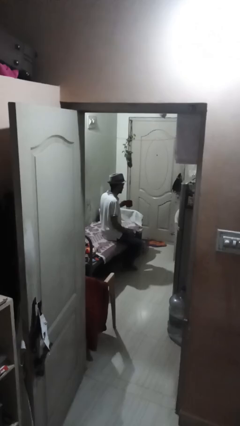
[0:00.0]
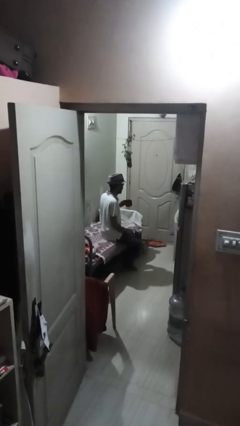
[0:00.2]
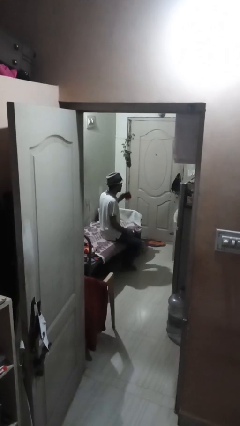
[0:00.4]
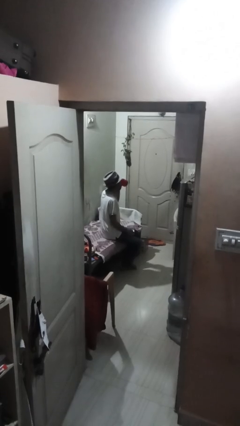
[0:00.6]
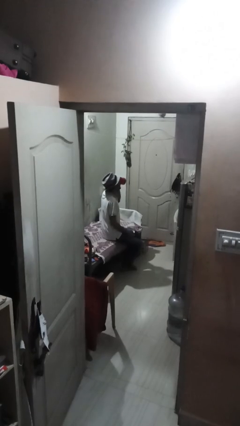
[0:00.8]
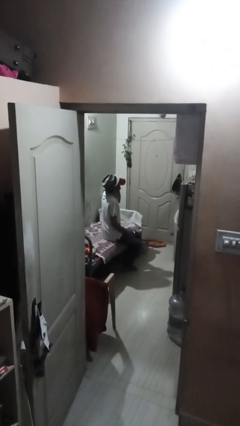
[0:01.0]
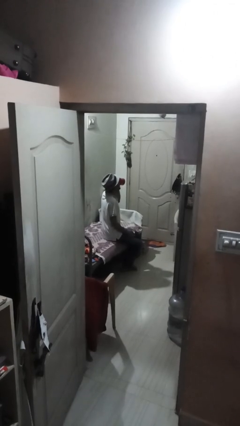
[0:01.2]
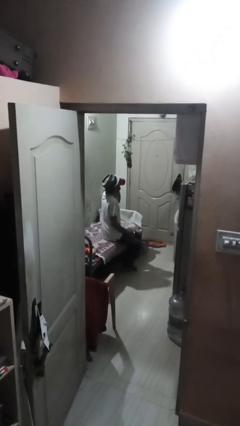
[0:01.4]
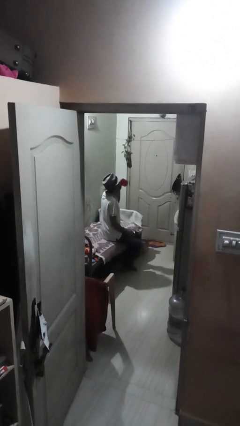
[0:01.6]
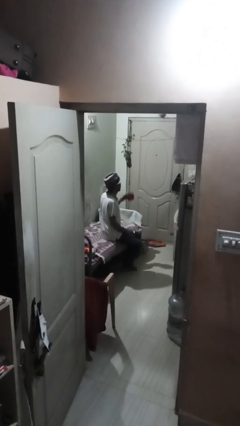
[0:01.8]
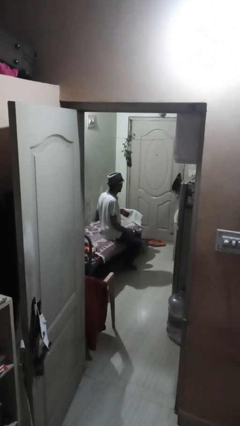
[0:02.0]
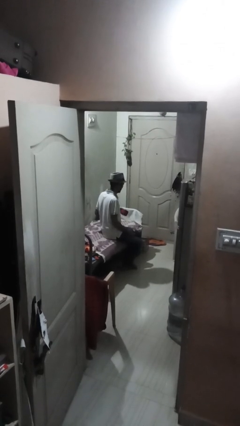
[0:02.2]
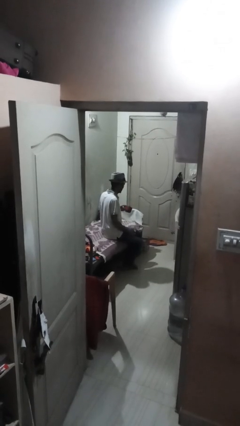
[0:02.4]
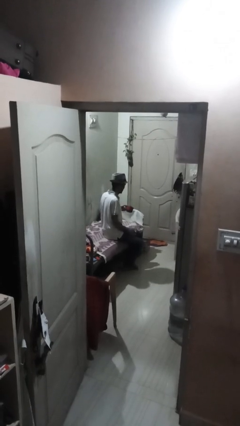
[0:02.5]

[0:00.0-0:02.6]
person drinks from mug

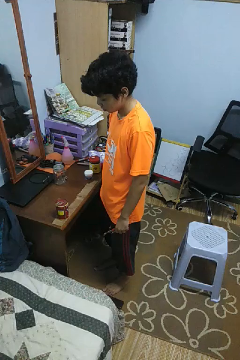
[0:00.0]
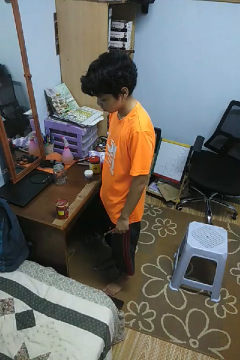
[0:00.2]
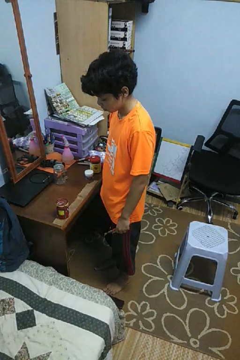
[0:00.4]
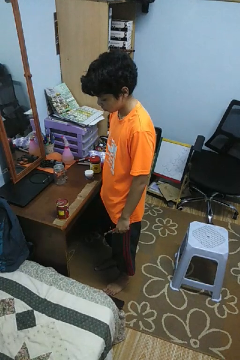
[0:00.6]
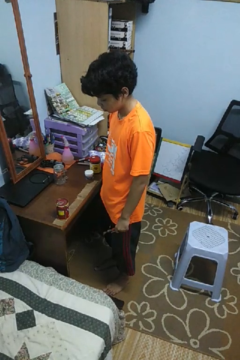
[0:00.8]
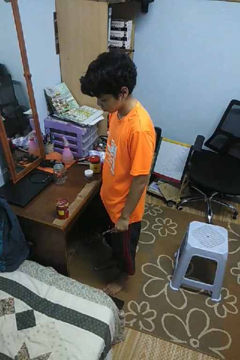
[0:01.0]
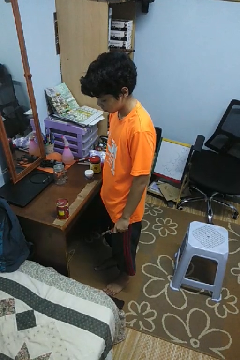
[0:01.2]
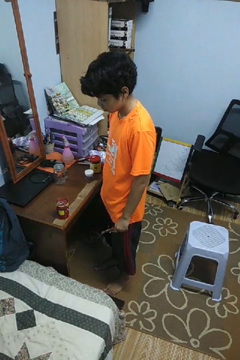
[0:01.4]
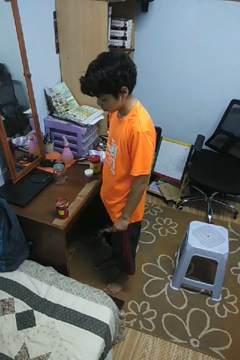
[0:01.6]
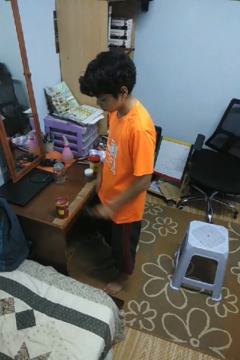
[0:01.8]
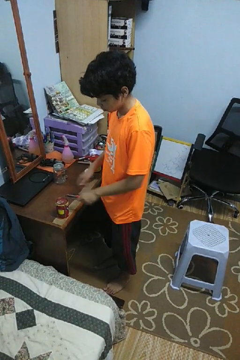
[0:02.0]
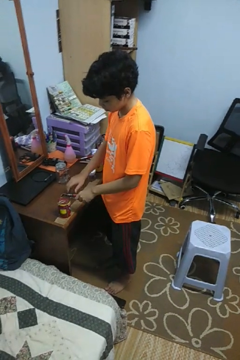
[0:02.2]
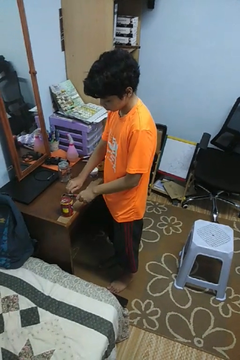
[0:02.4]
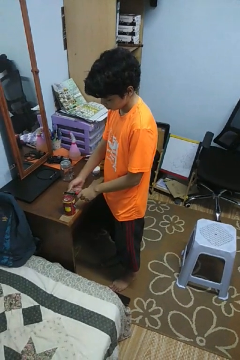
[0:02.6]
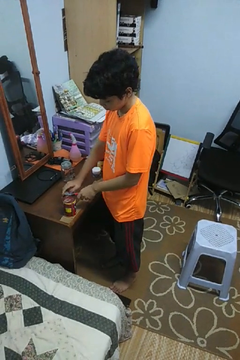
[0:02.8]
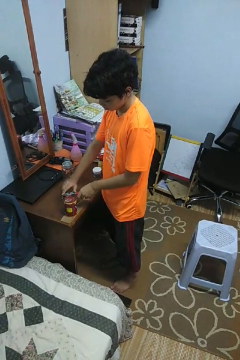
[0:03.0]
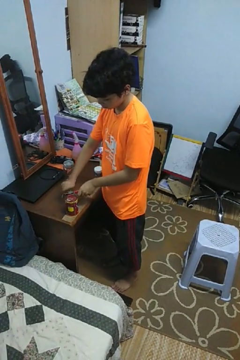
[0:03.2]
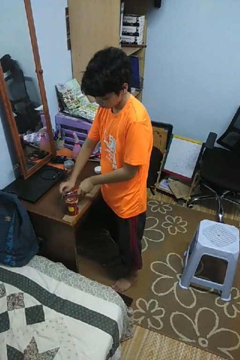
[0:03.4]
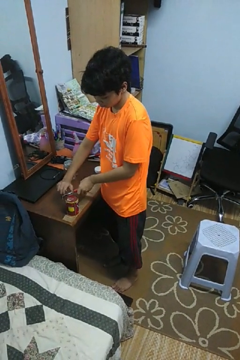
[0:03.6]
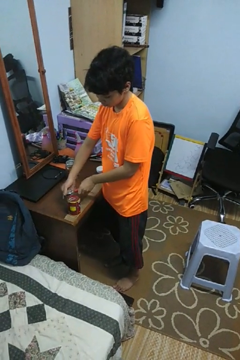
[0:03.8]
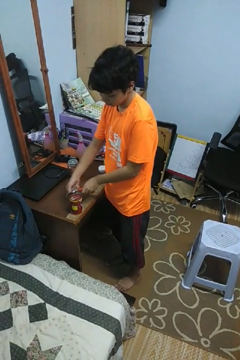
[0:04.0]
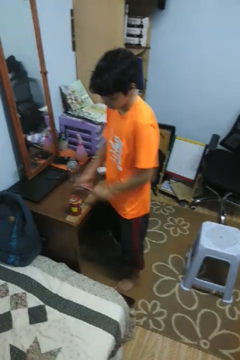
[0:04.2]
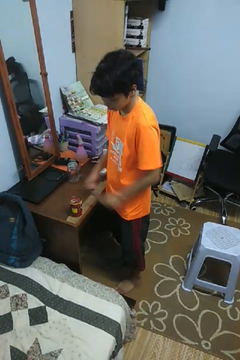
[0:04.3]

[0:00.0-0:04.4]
person opens can with can opener

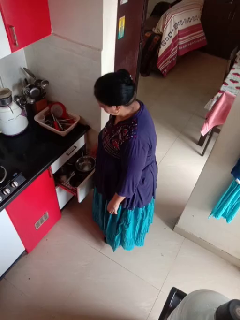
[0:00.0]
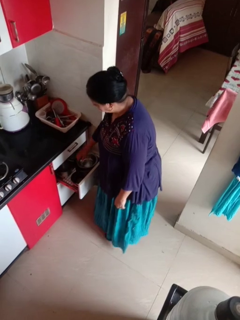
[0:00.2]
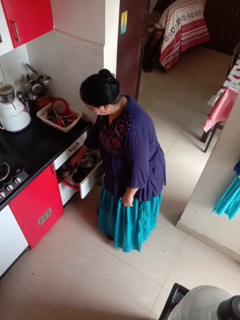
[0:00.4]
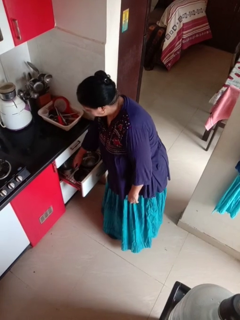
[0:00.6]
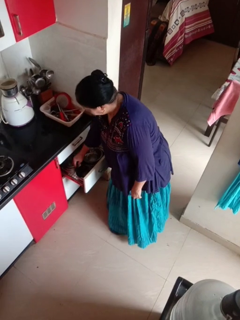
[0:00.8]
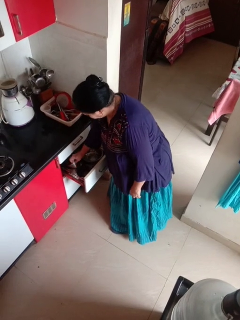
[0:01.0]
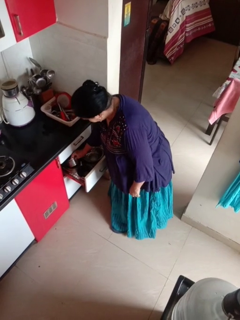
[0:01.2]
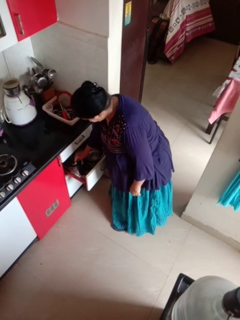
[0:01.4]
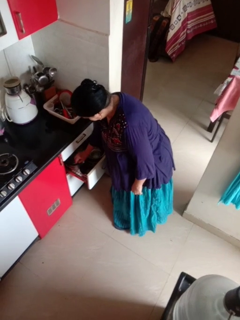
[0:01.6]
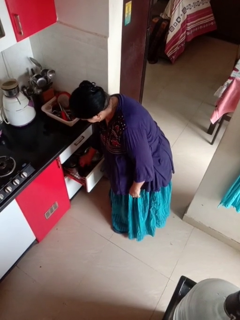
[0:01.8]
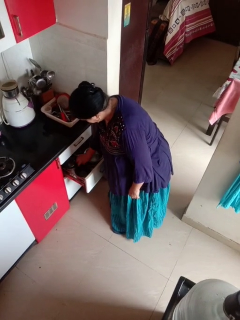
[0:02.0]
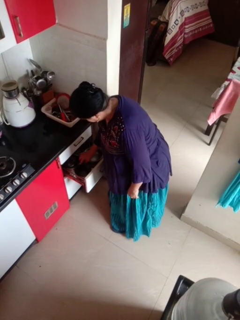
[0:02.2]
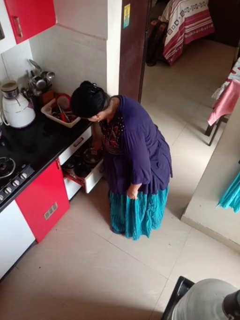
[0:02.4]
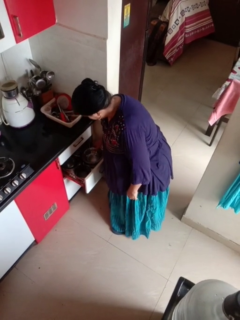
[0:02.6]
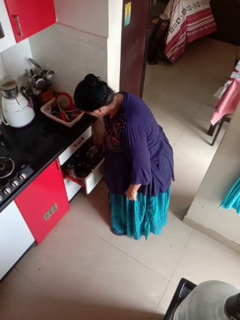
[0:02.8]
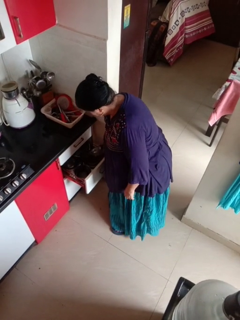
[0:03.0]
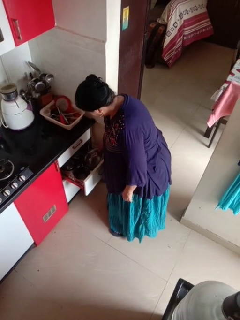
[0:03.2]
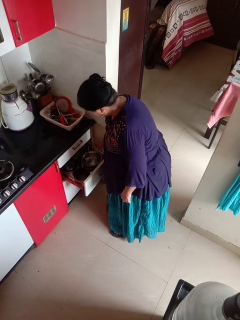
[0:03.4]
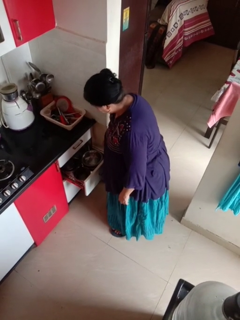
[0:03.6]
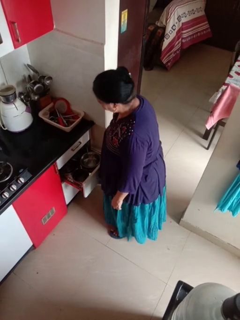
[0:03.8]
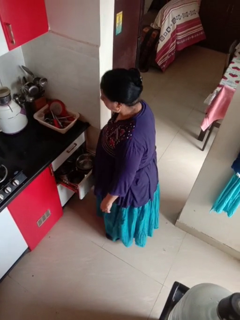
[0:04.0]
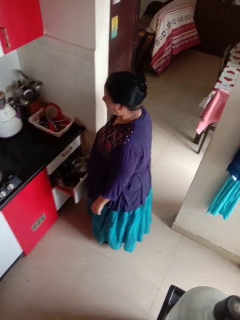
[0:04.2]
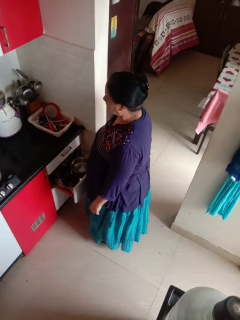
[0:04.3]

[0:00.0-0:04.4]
person searches in kitchen drawer

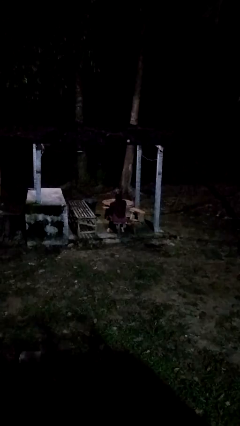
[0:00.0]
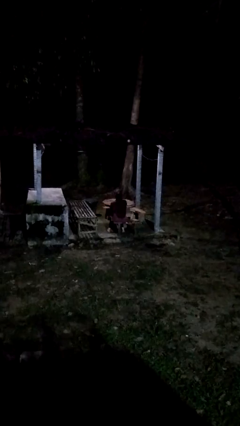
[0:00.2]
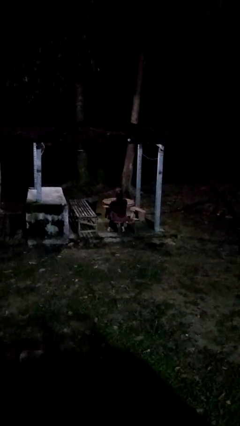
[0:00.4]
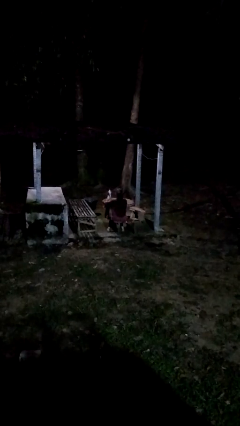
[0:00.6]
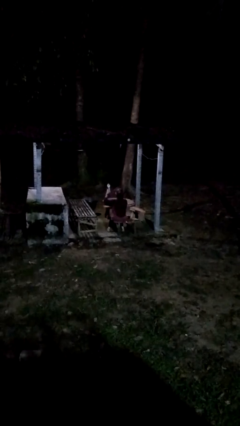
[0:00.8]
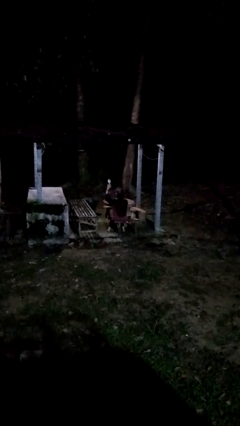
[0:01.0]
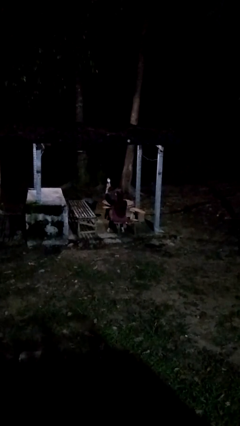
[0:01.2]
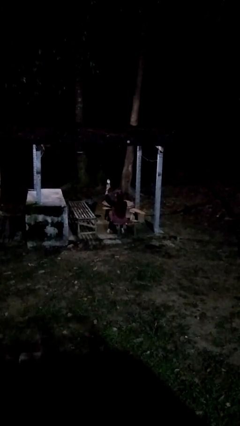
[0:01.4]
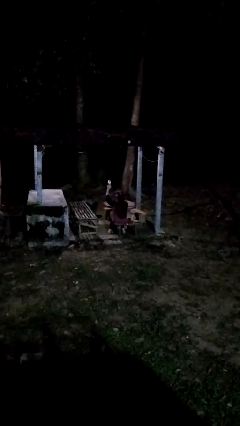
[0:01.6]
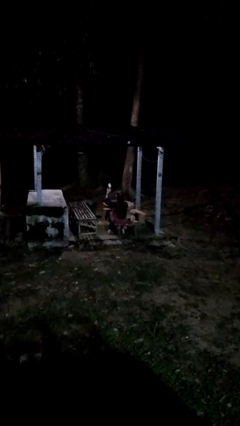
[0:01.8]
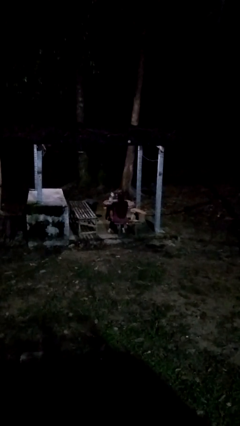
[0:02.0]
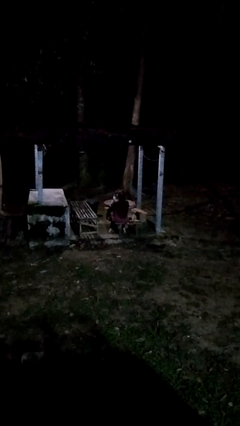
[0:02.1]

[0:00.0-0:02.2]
person holds object above head

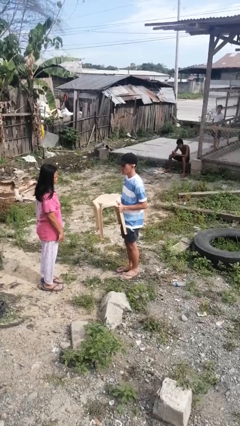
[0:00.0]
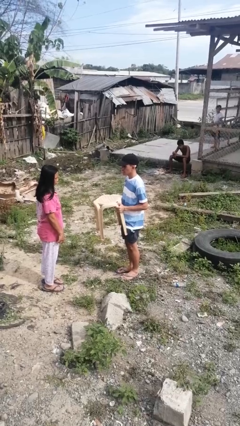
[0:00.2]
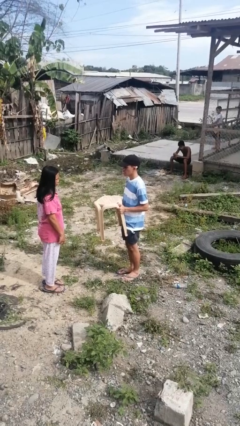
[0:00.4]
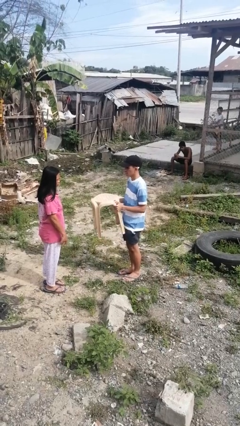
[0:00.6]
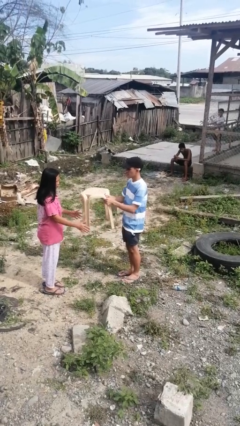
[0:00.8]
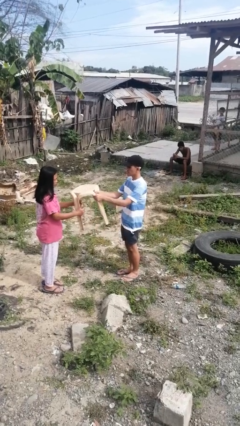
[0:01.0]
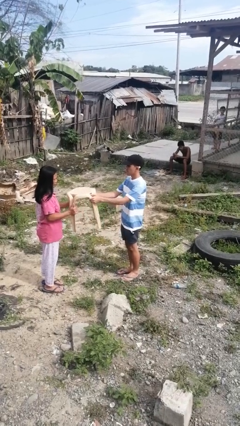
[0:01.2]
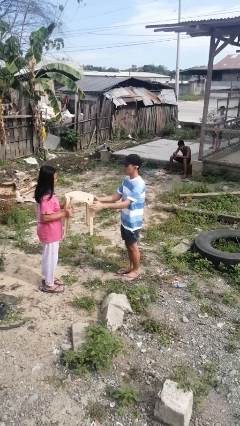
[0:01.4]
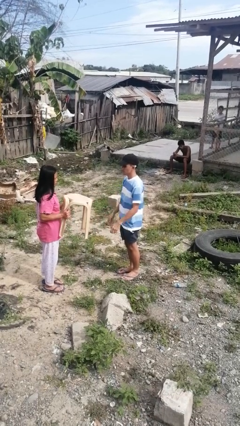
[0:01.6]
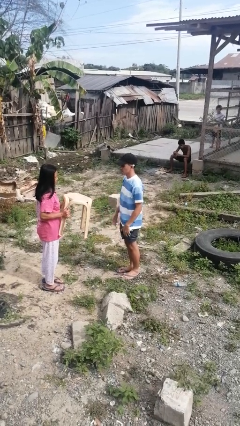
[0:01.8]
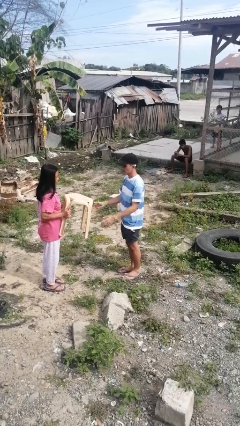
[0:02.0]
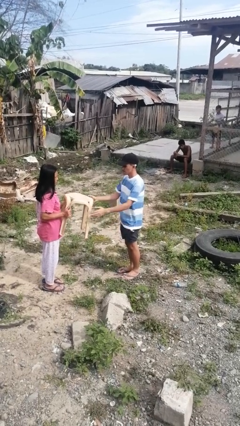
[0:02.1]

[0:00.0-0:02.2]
person transfers object to person

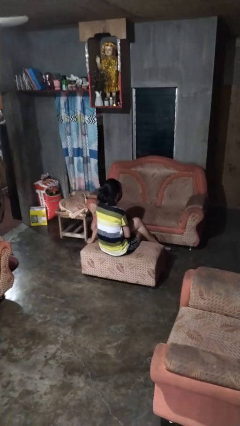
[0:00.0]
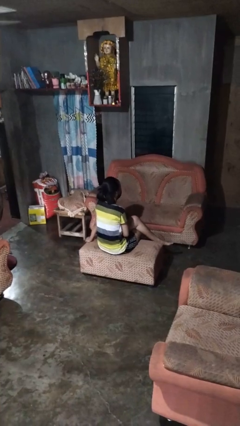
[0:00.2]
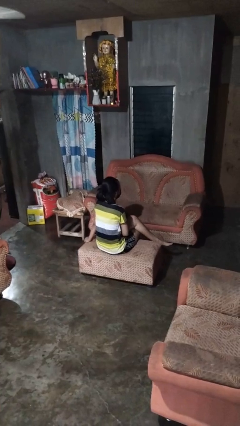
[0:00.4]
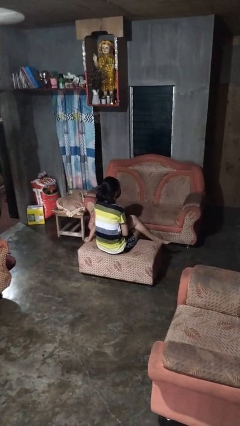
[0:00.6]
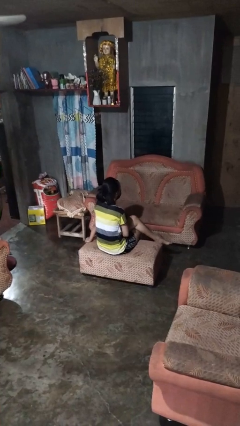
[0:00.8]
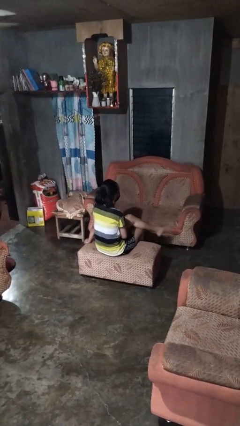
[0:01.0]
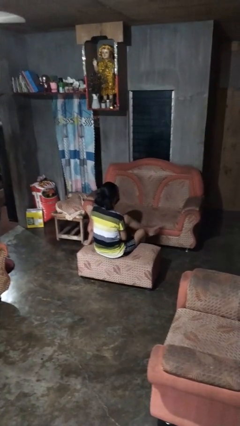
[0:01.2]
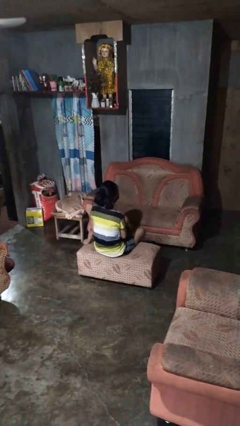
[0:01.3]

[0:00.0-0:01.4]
person crosses legs

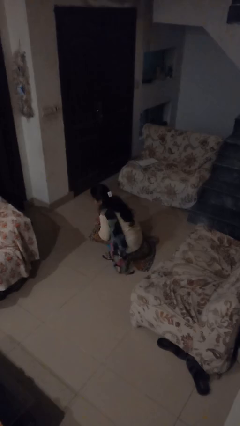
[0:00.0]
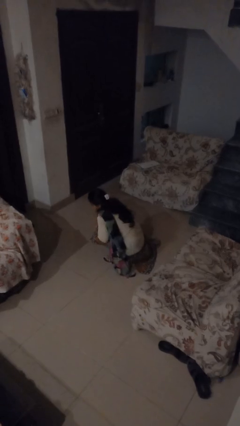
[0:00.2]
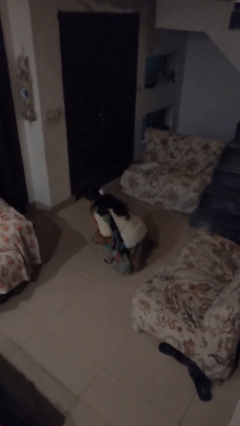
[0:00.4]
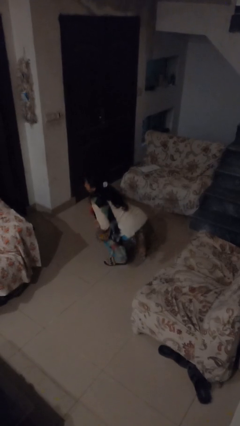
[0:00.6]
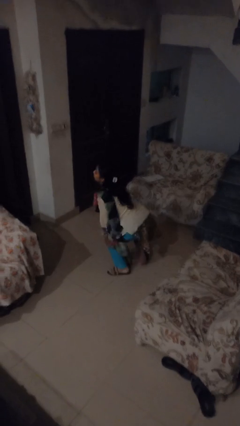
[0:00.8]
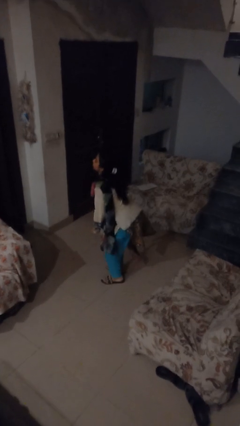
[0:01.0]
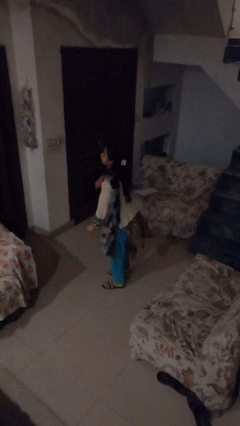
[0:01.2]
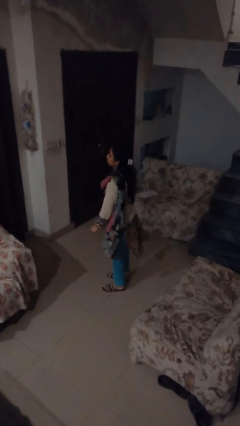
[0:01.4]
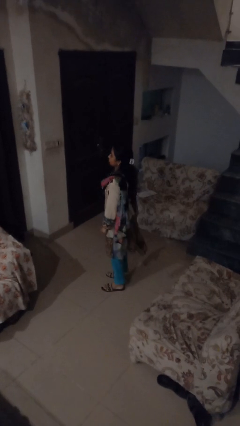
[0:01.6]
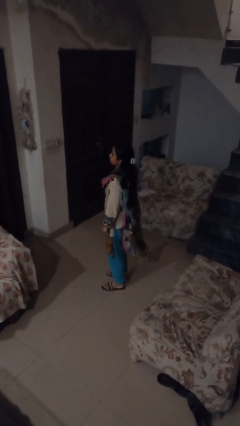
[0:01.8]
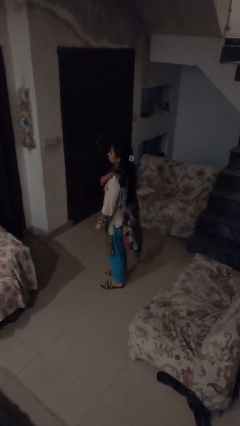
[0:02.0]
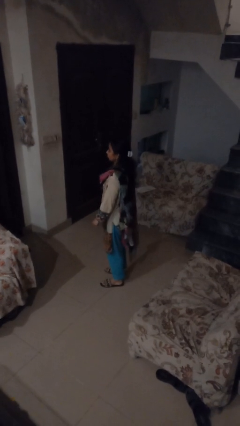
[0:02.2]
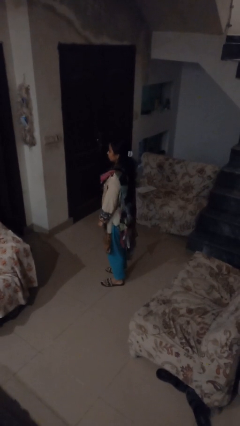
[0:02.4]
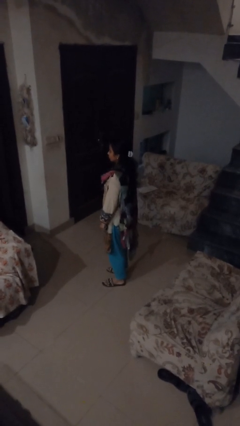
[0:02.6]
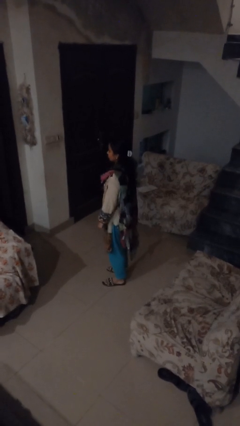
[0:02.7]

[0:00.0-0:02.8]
person stands up
